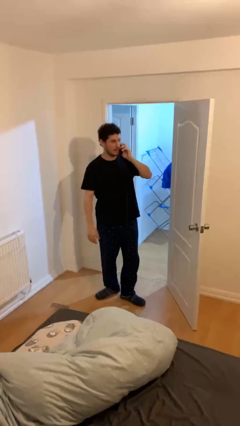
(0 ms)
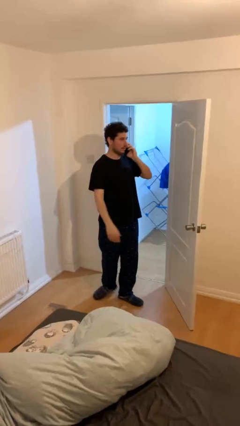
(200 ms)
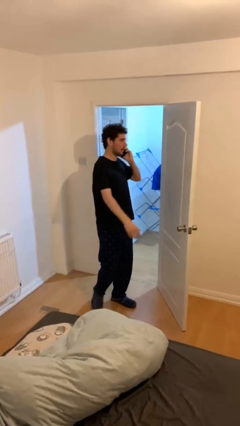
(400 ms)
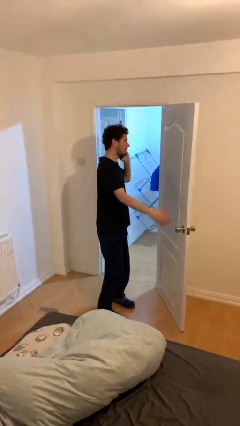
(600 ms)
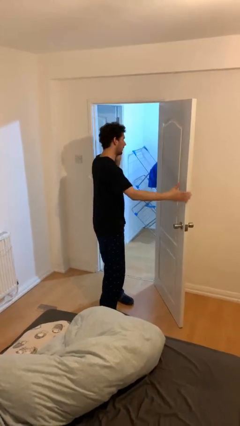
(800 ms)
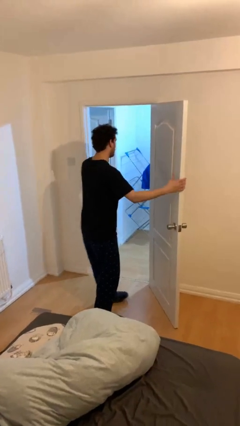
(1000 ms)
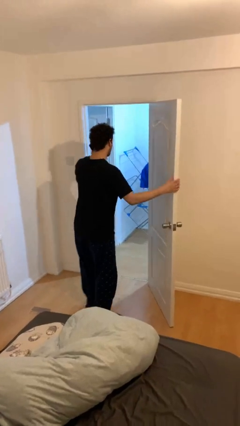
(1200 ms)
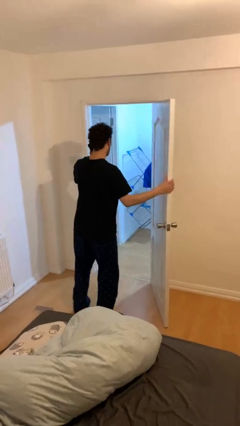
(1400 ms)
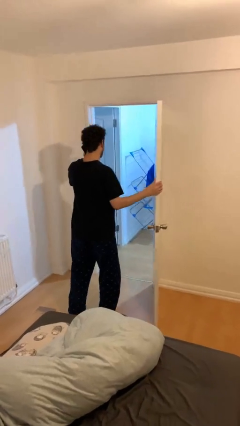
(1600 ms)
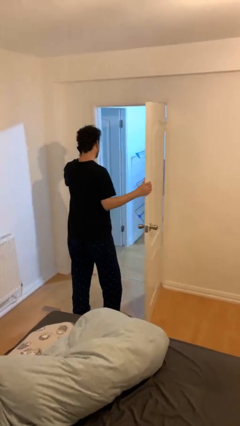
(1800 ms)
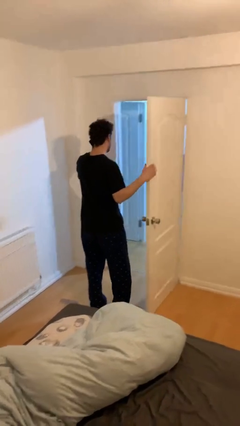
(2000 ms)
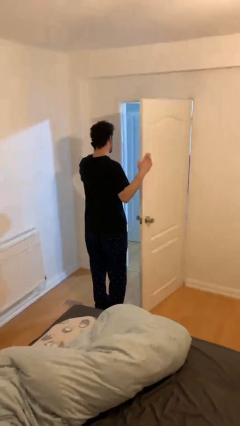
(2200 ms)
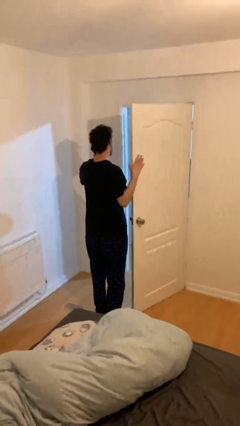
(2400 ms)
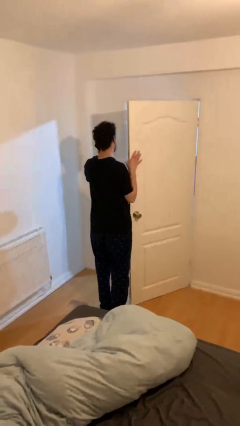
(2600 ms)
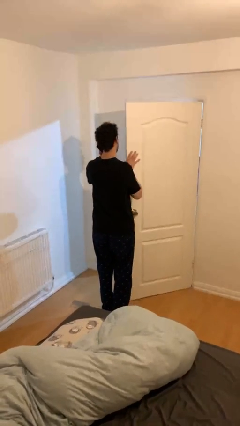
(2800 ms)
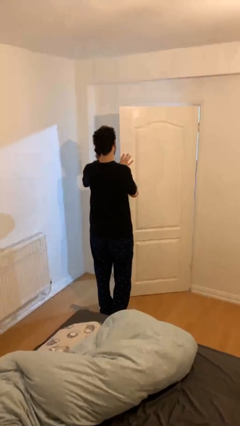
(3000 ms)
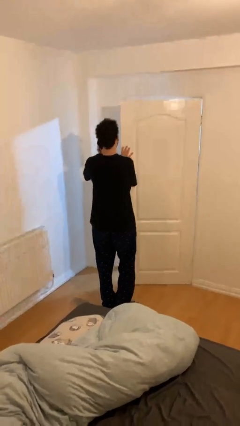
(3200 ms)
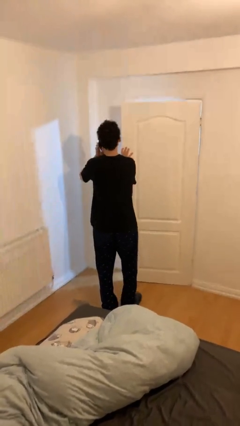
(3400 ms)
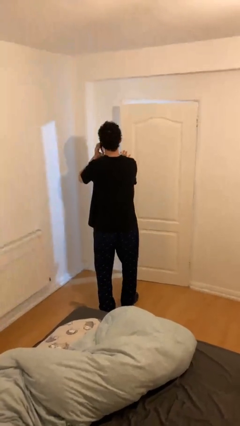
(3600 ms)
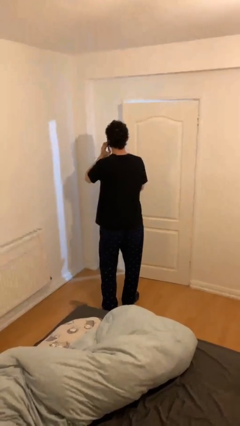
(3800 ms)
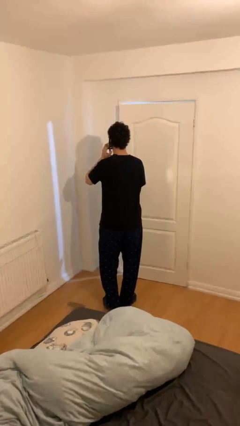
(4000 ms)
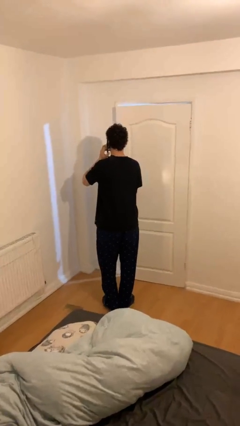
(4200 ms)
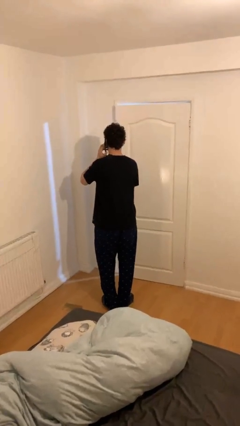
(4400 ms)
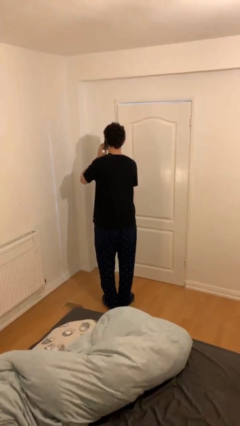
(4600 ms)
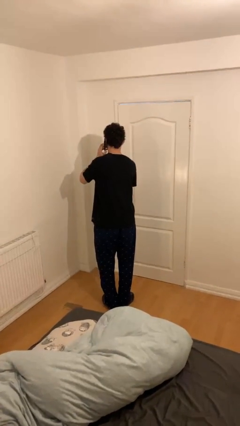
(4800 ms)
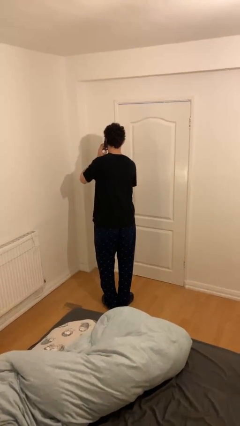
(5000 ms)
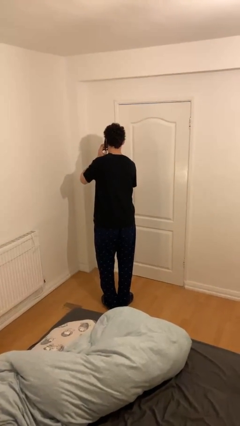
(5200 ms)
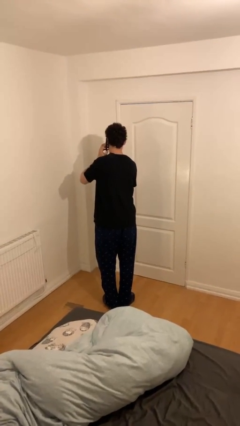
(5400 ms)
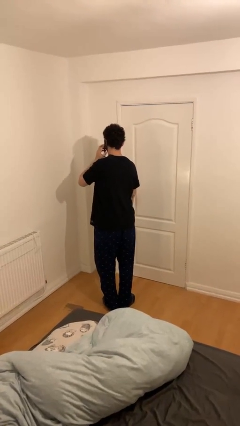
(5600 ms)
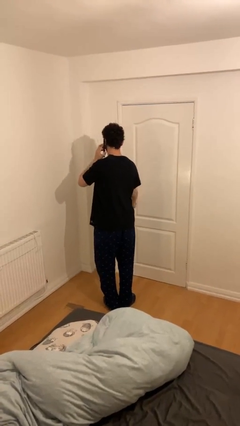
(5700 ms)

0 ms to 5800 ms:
person closes facility door

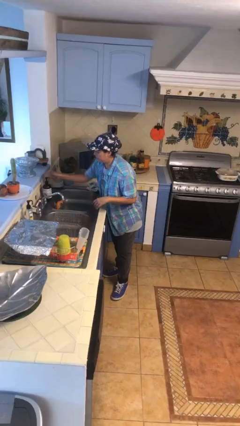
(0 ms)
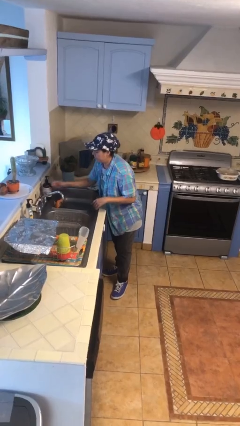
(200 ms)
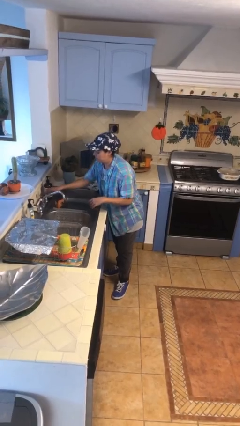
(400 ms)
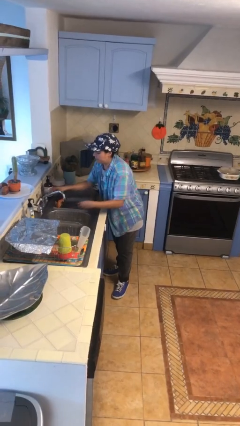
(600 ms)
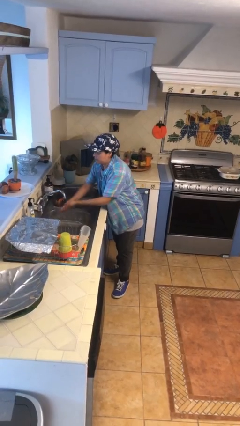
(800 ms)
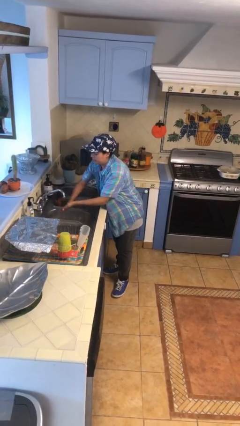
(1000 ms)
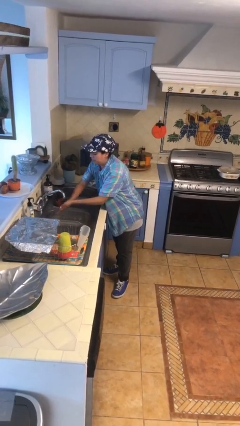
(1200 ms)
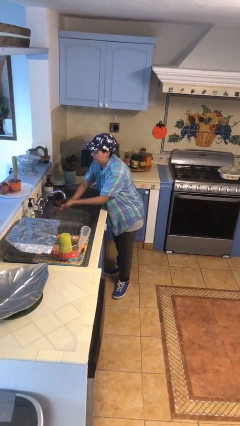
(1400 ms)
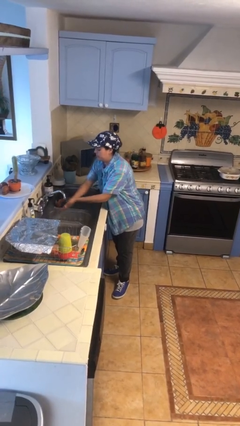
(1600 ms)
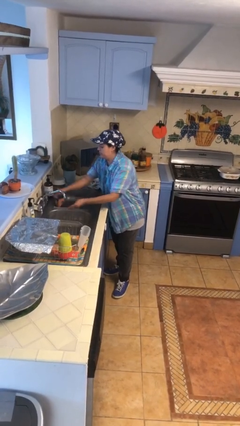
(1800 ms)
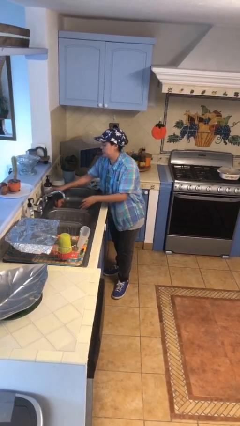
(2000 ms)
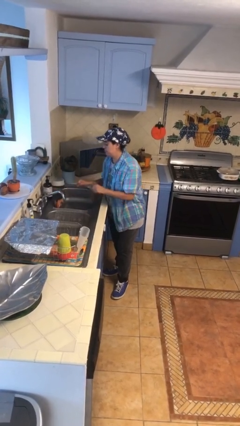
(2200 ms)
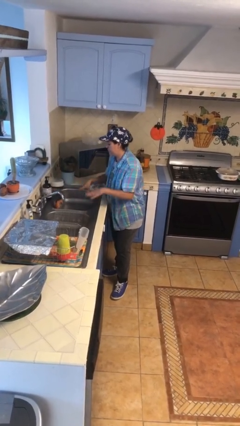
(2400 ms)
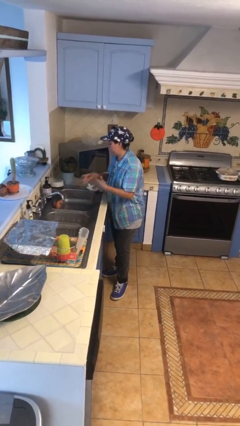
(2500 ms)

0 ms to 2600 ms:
person washes hands

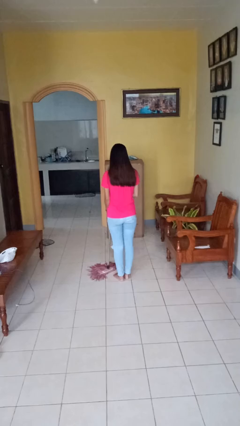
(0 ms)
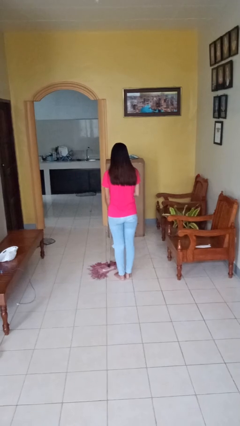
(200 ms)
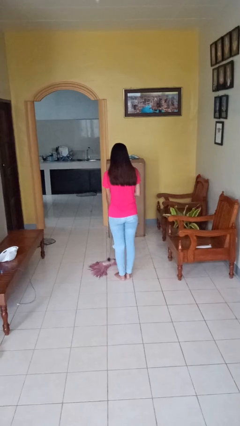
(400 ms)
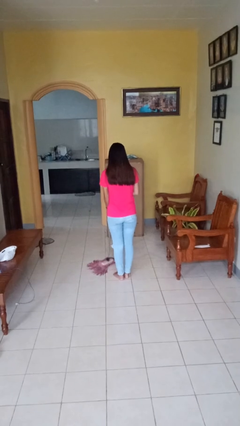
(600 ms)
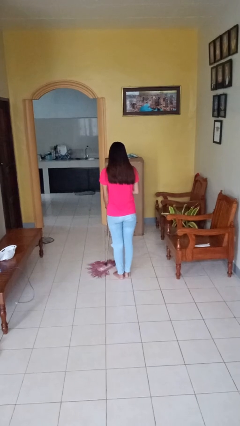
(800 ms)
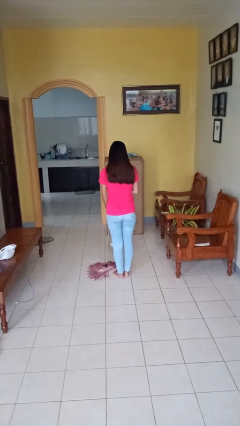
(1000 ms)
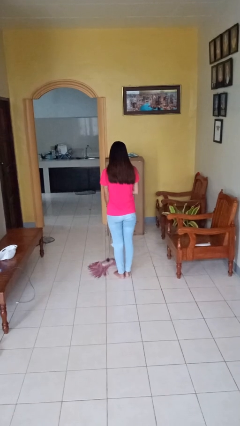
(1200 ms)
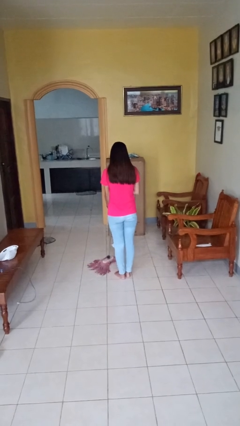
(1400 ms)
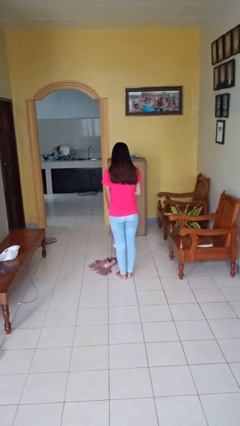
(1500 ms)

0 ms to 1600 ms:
person mops

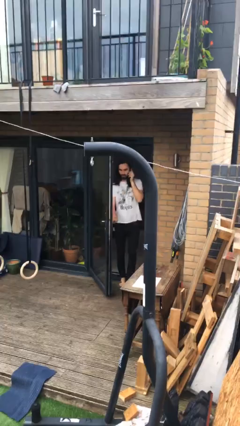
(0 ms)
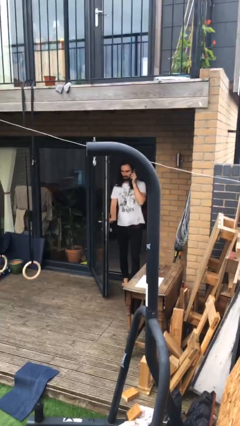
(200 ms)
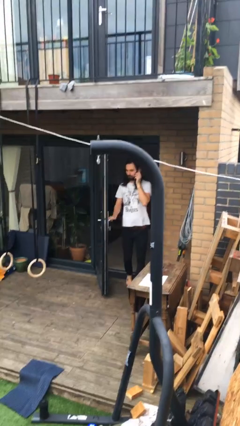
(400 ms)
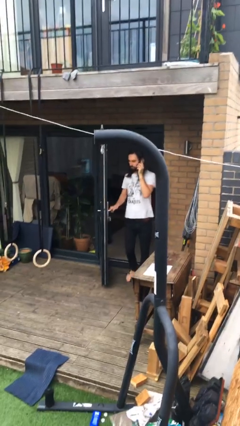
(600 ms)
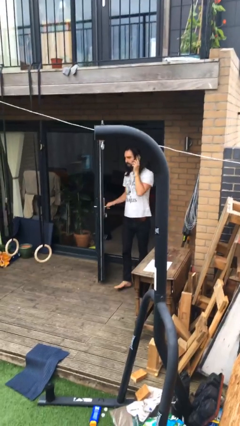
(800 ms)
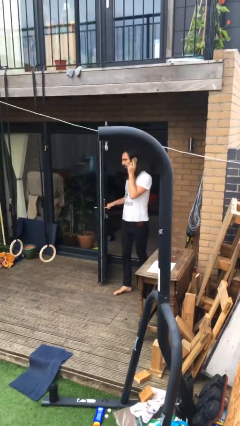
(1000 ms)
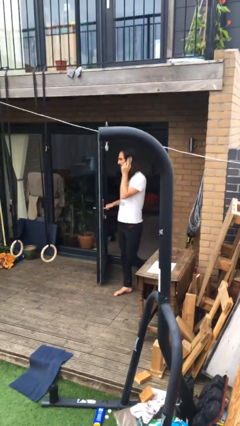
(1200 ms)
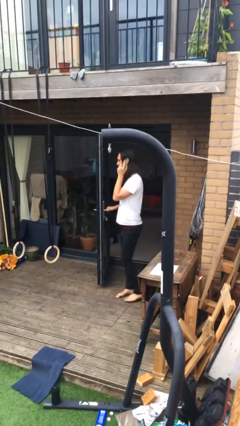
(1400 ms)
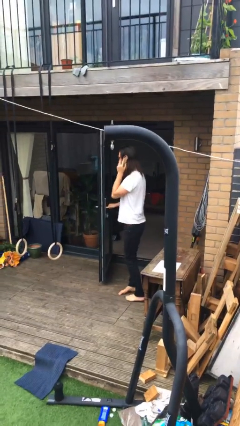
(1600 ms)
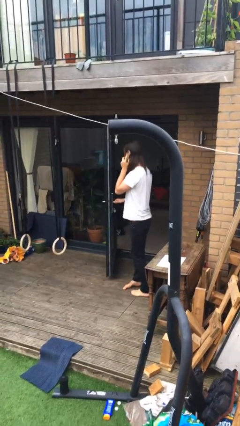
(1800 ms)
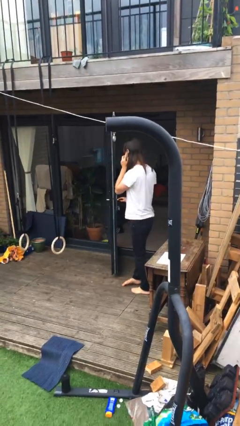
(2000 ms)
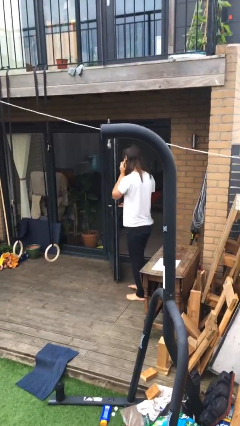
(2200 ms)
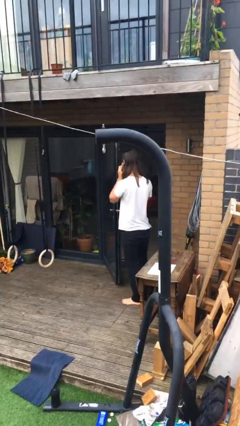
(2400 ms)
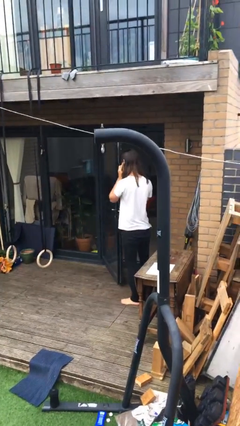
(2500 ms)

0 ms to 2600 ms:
person enters scene through structure

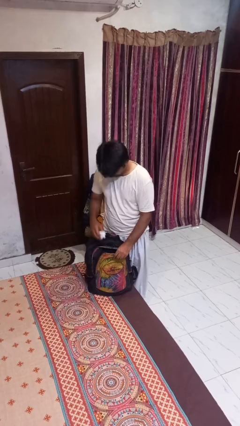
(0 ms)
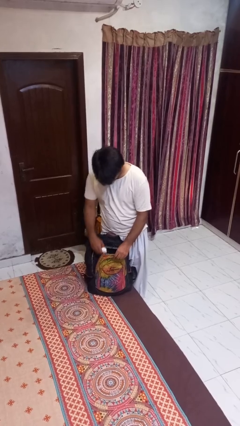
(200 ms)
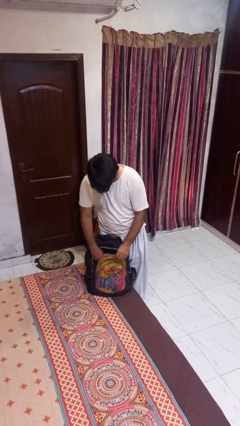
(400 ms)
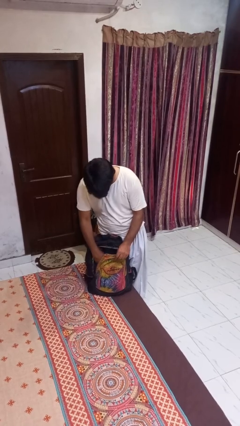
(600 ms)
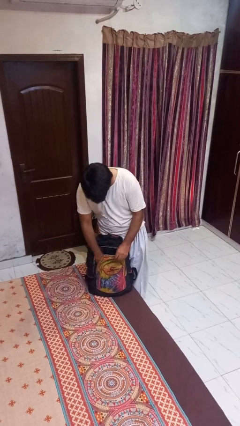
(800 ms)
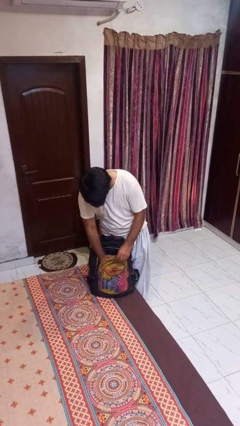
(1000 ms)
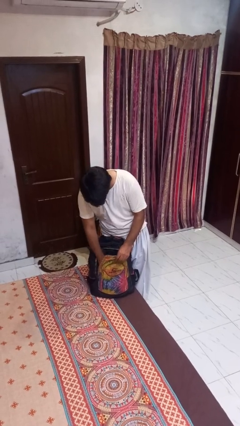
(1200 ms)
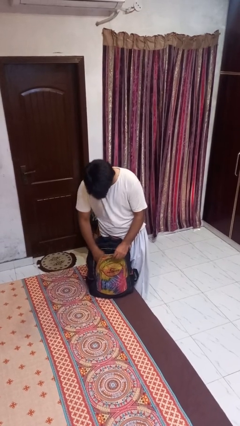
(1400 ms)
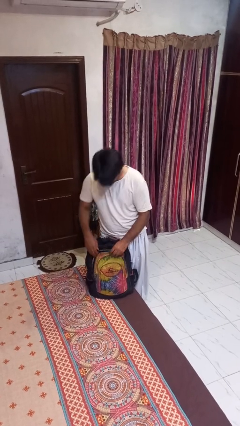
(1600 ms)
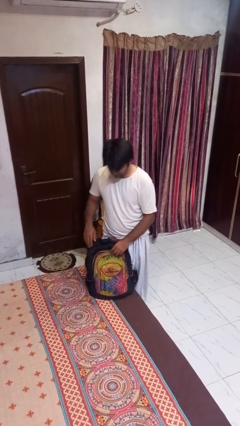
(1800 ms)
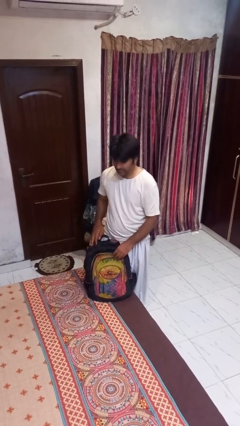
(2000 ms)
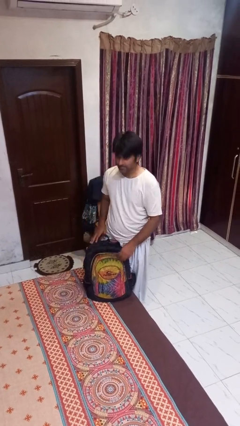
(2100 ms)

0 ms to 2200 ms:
person puts object into backpack

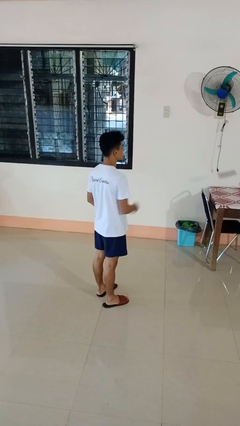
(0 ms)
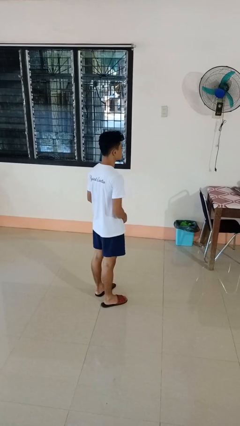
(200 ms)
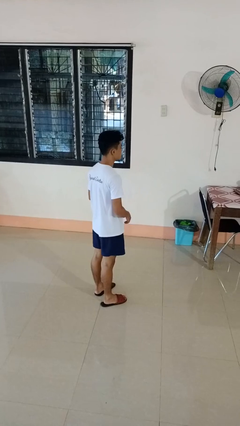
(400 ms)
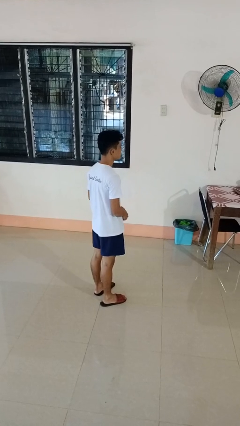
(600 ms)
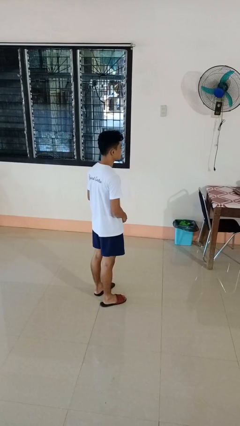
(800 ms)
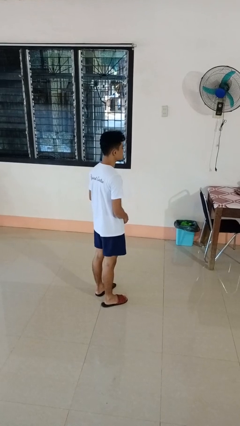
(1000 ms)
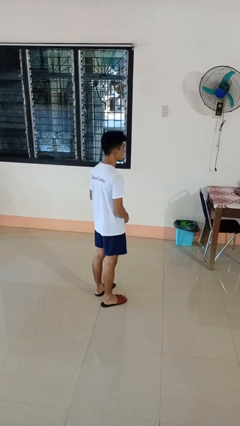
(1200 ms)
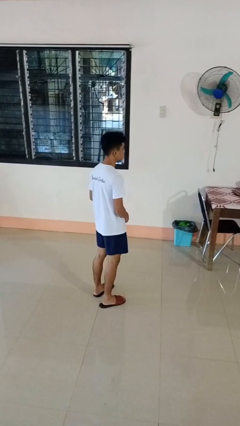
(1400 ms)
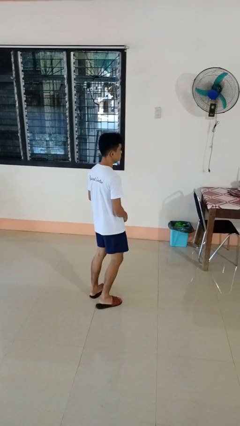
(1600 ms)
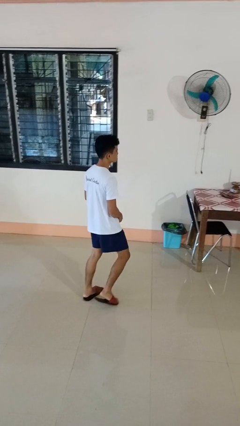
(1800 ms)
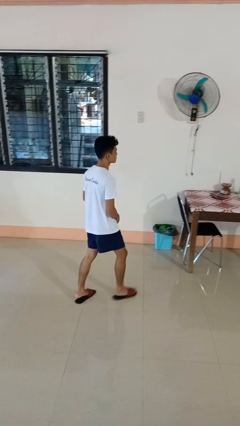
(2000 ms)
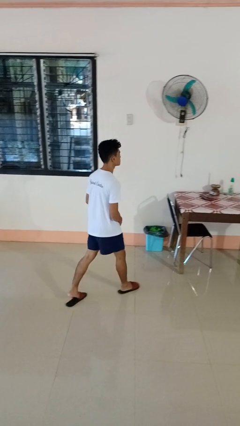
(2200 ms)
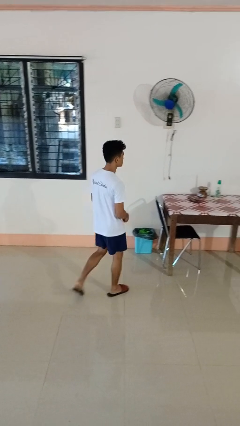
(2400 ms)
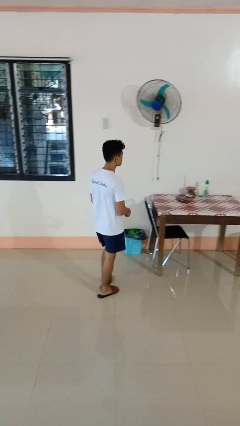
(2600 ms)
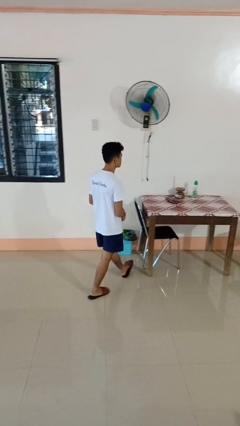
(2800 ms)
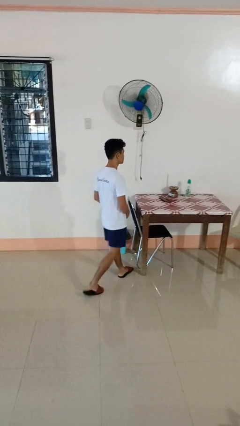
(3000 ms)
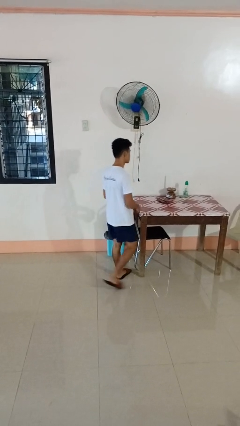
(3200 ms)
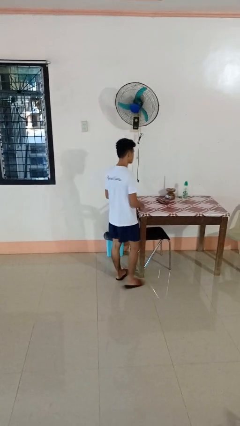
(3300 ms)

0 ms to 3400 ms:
person throws object on table
